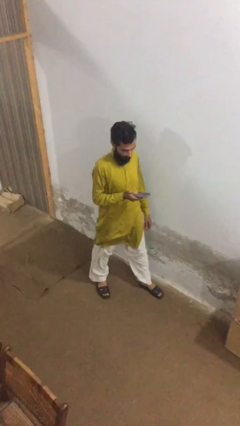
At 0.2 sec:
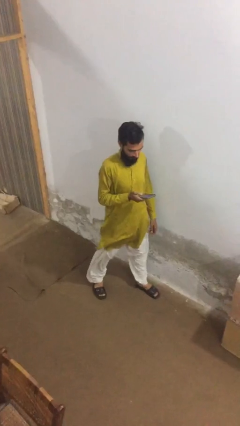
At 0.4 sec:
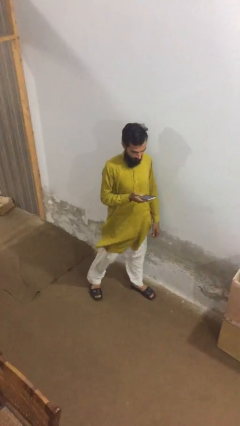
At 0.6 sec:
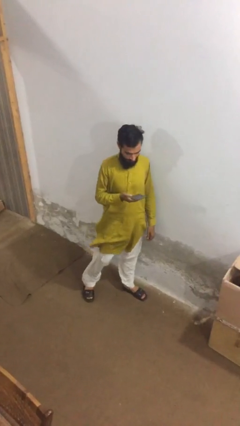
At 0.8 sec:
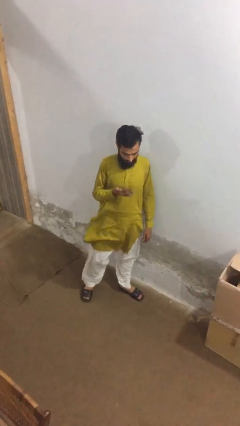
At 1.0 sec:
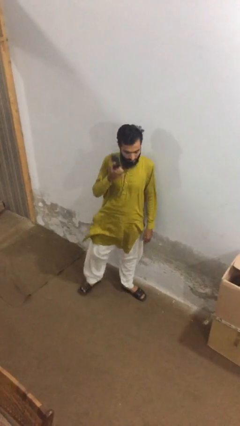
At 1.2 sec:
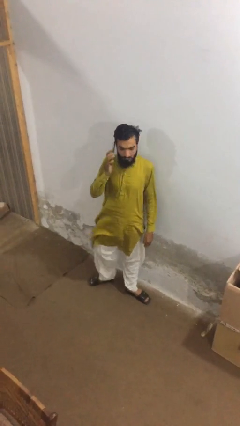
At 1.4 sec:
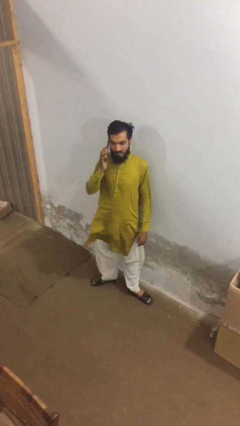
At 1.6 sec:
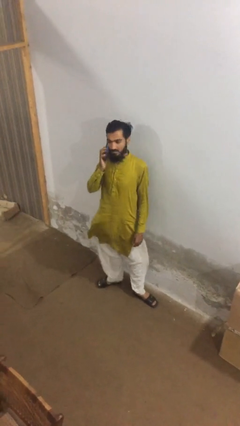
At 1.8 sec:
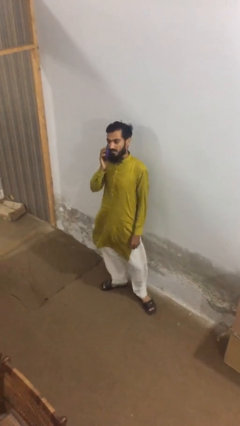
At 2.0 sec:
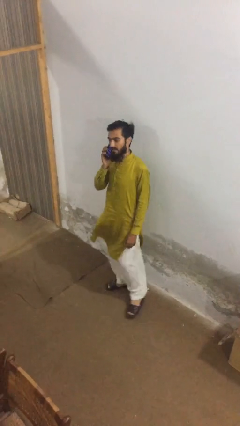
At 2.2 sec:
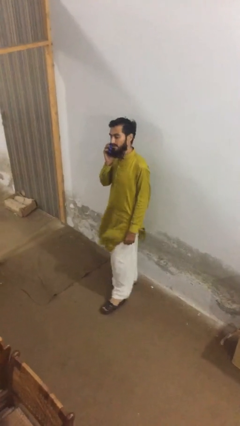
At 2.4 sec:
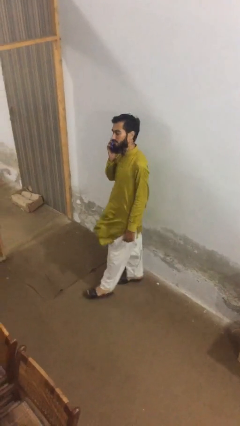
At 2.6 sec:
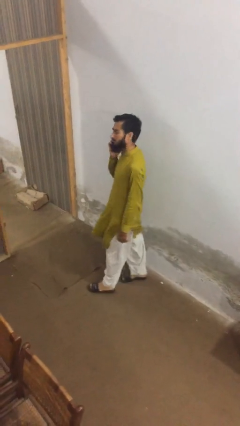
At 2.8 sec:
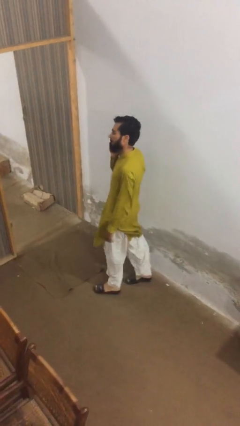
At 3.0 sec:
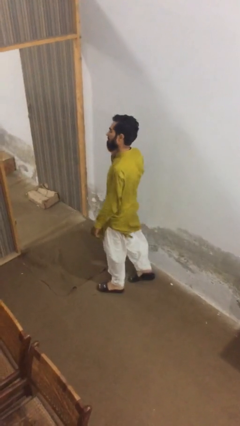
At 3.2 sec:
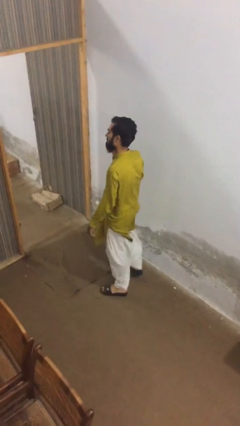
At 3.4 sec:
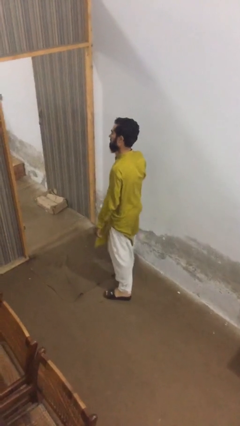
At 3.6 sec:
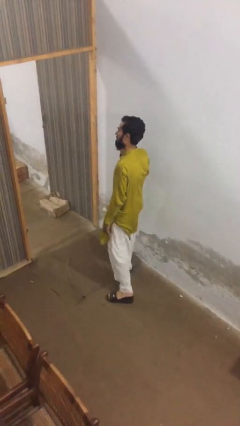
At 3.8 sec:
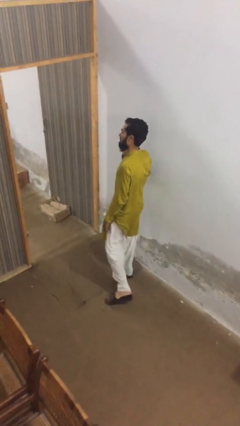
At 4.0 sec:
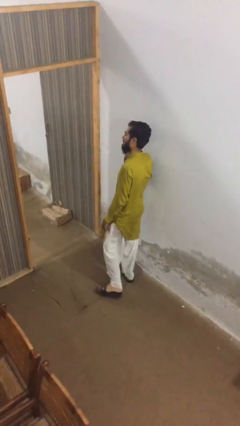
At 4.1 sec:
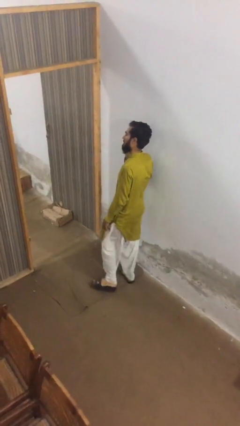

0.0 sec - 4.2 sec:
person talks on phone

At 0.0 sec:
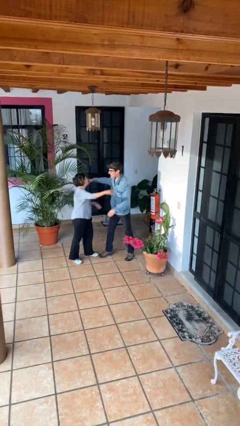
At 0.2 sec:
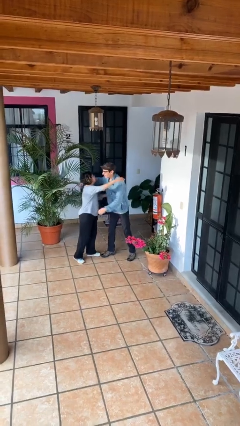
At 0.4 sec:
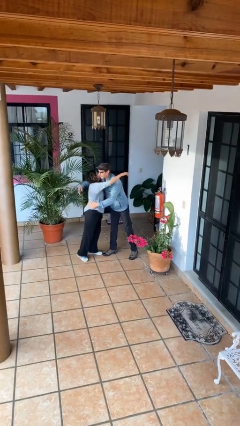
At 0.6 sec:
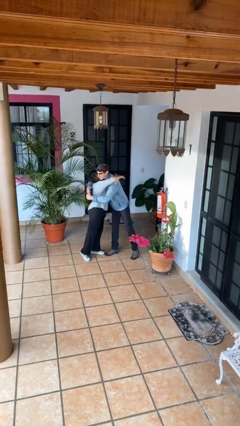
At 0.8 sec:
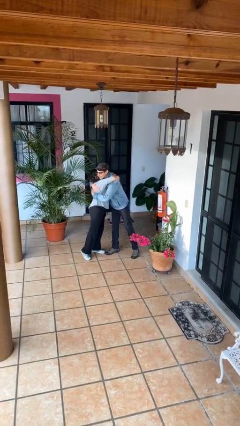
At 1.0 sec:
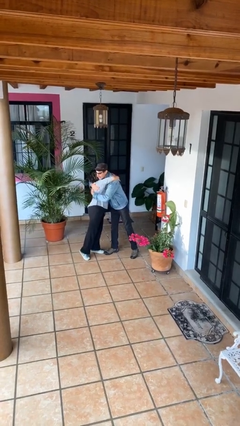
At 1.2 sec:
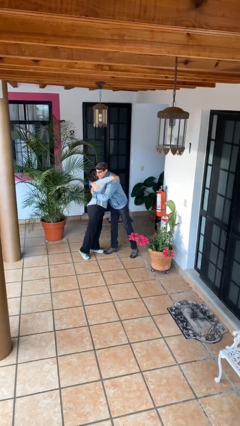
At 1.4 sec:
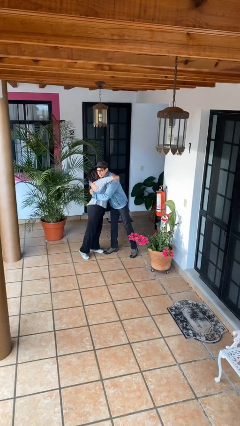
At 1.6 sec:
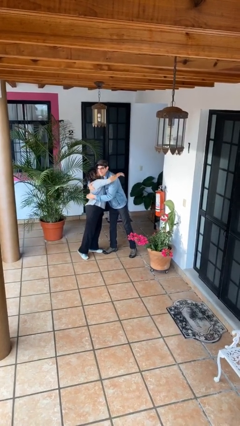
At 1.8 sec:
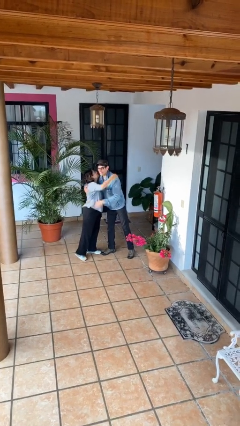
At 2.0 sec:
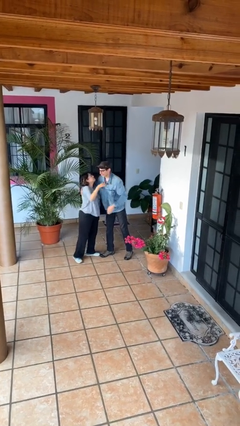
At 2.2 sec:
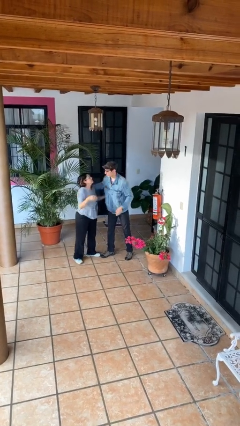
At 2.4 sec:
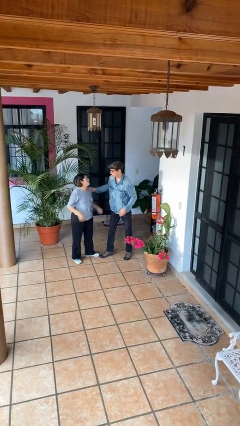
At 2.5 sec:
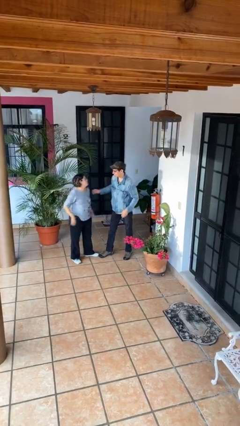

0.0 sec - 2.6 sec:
person embraces person

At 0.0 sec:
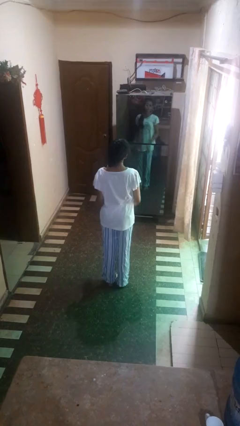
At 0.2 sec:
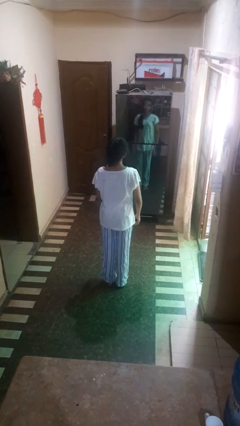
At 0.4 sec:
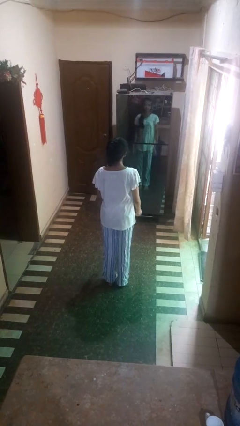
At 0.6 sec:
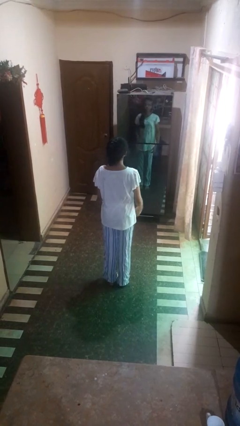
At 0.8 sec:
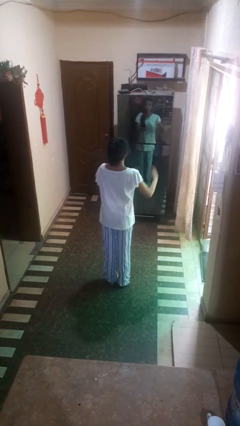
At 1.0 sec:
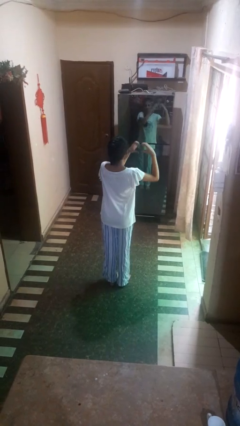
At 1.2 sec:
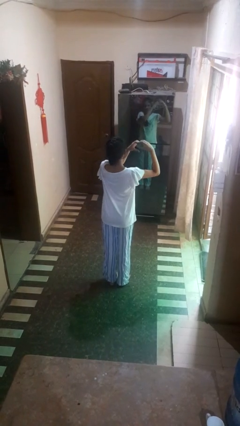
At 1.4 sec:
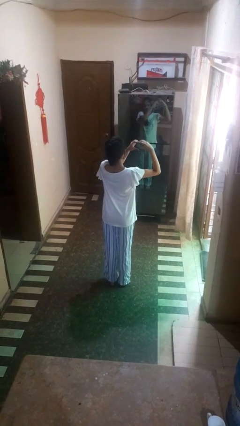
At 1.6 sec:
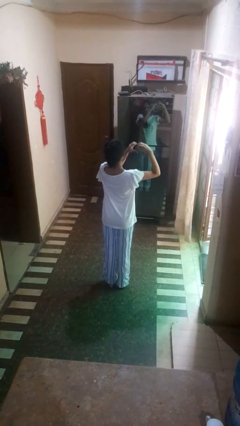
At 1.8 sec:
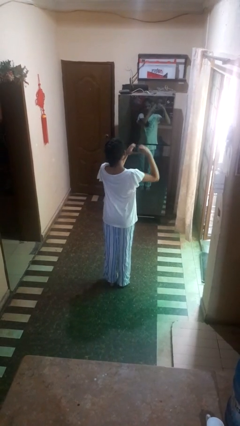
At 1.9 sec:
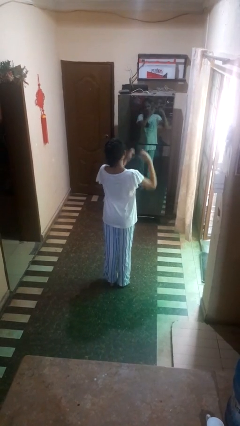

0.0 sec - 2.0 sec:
person gestures heart

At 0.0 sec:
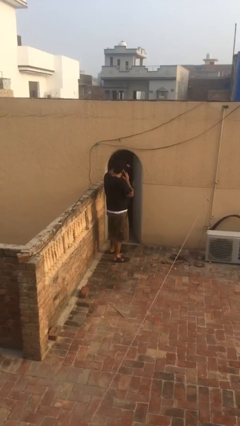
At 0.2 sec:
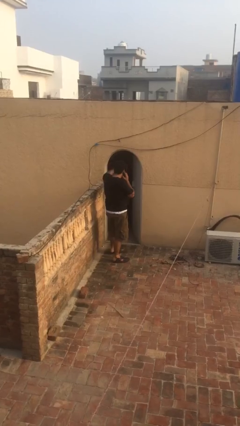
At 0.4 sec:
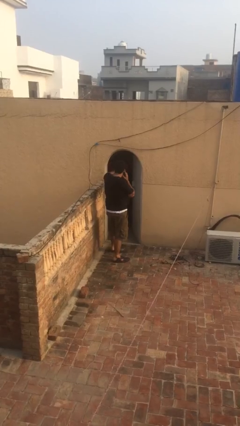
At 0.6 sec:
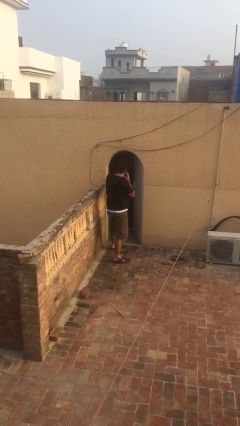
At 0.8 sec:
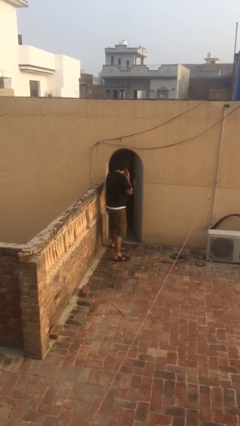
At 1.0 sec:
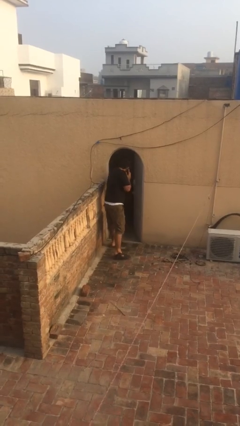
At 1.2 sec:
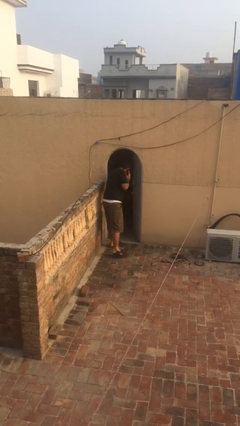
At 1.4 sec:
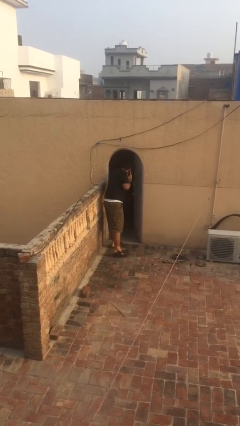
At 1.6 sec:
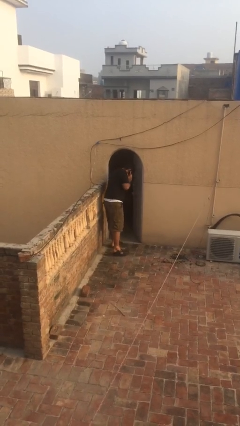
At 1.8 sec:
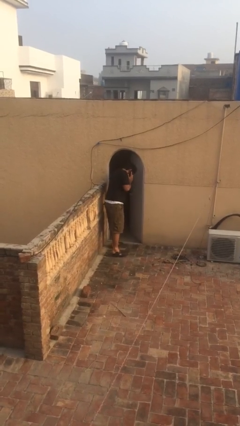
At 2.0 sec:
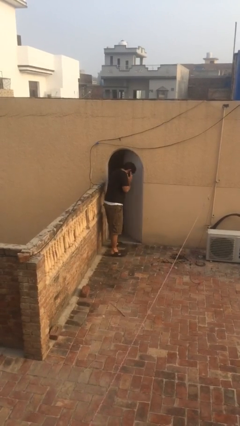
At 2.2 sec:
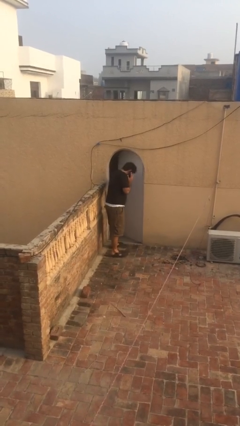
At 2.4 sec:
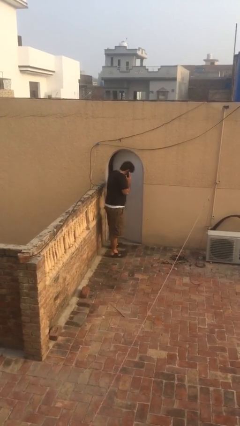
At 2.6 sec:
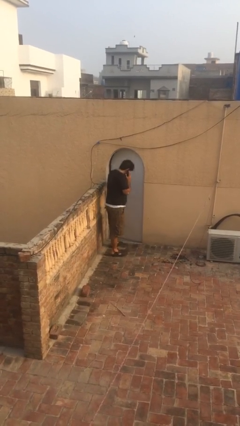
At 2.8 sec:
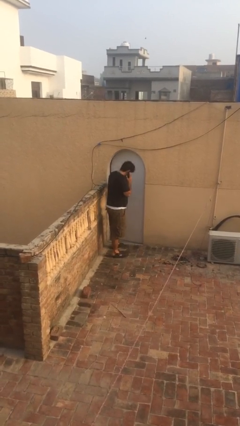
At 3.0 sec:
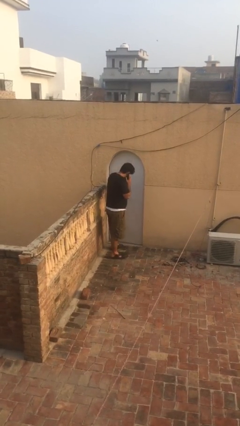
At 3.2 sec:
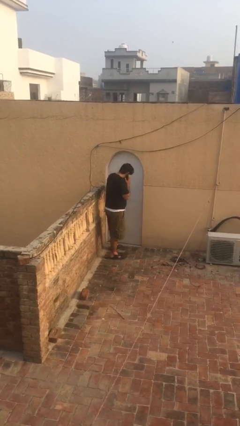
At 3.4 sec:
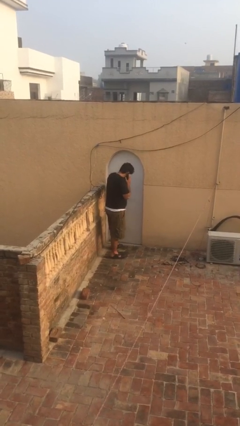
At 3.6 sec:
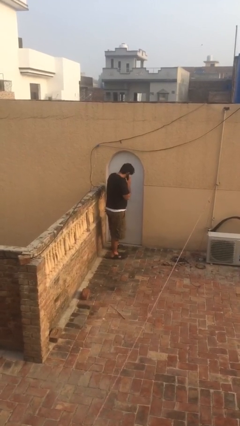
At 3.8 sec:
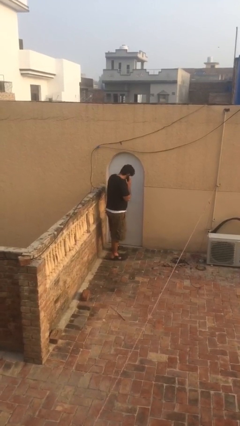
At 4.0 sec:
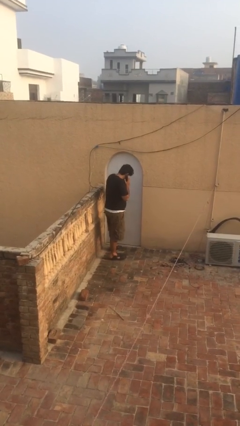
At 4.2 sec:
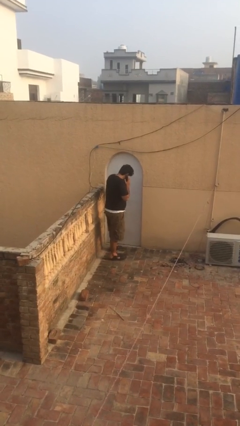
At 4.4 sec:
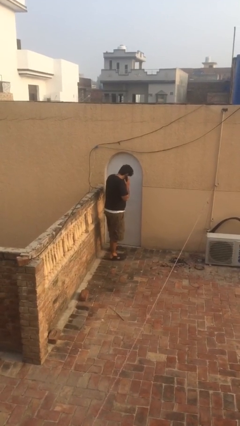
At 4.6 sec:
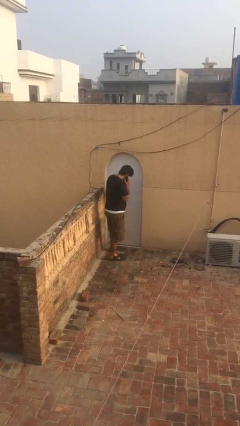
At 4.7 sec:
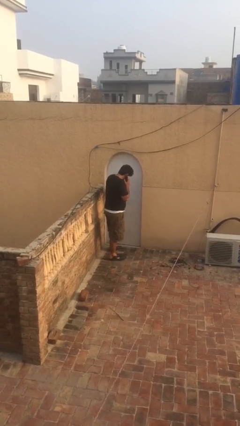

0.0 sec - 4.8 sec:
person closes facility door

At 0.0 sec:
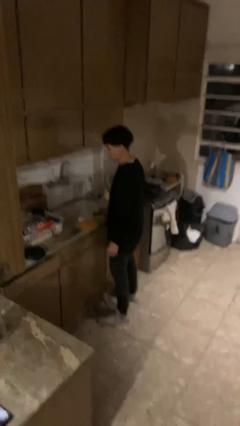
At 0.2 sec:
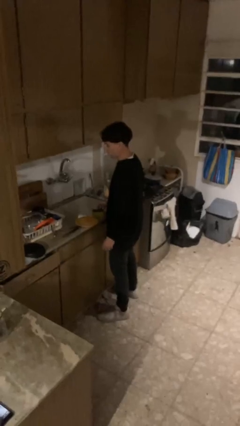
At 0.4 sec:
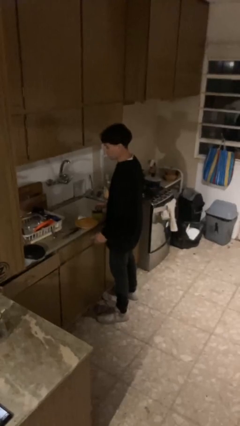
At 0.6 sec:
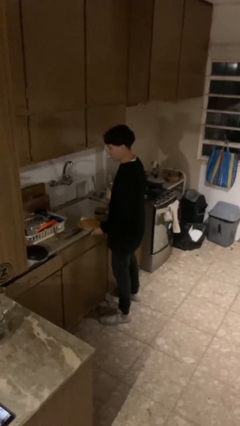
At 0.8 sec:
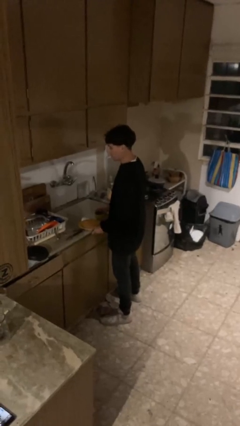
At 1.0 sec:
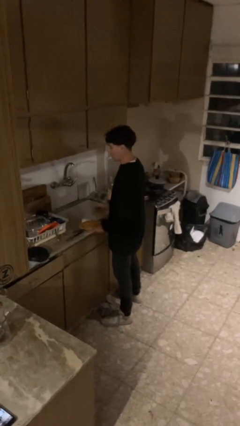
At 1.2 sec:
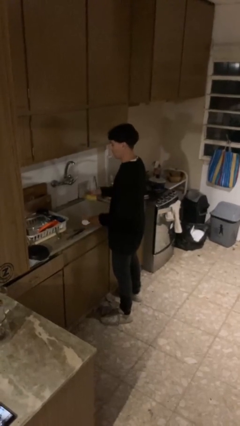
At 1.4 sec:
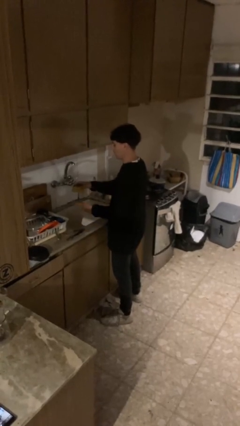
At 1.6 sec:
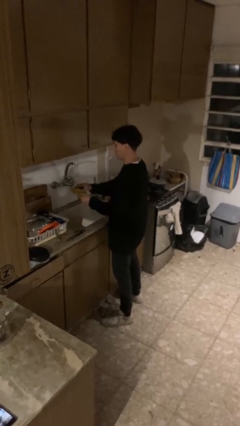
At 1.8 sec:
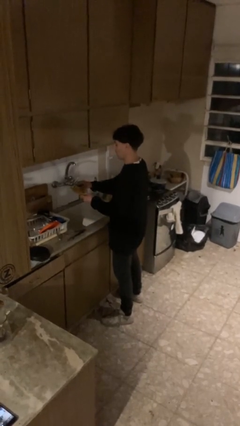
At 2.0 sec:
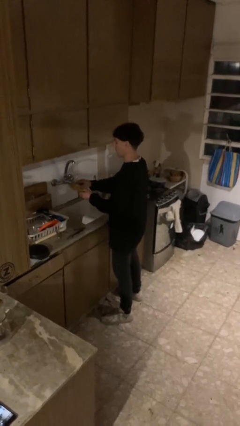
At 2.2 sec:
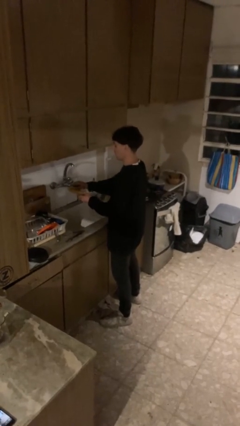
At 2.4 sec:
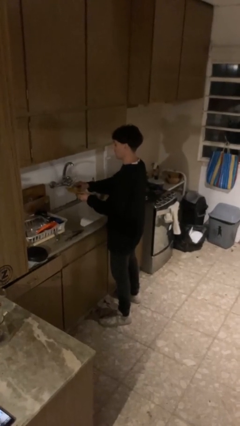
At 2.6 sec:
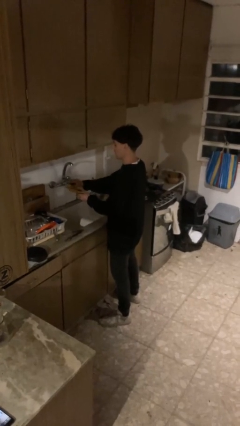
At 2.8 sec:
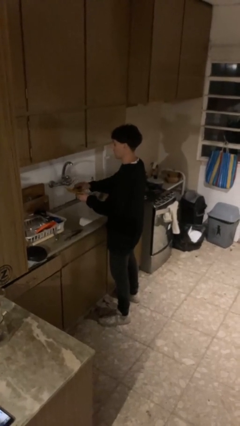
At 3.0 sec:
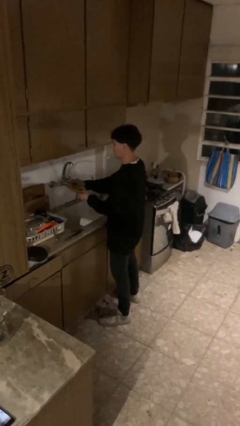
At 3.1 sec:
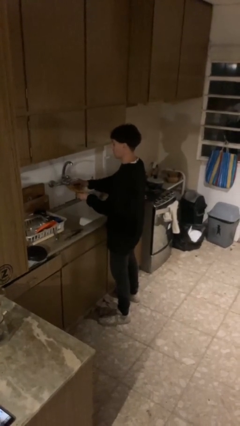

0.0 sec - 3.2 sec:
person washes dish

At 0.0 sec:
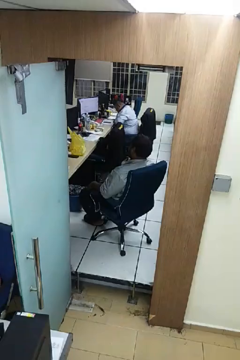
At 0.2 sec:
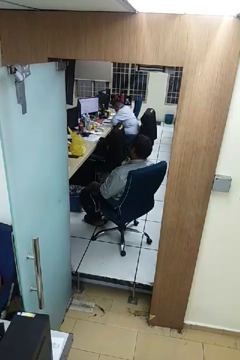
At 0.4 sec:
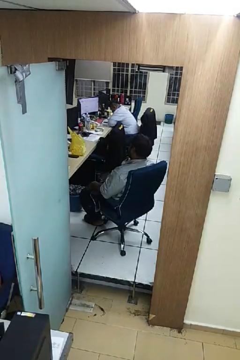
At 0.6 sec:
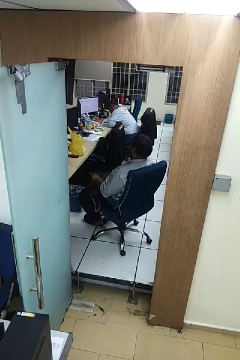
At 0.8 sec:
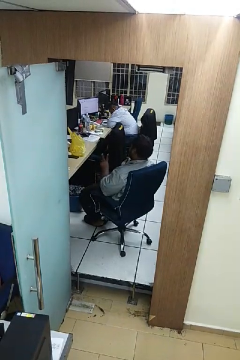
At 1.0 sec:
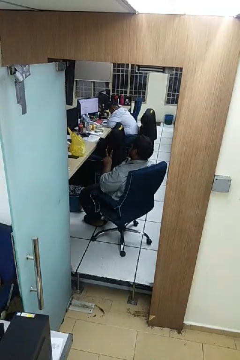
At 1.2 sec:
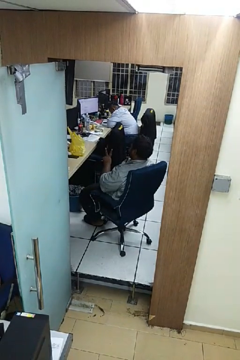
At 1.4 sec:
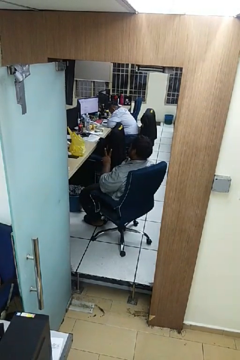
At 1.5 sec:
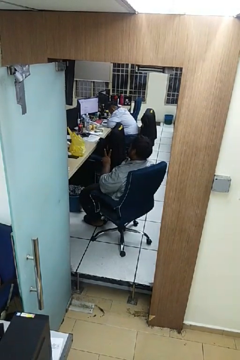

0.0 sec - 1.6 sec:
person gestures peace
